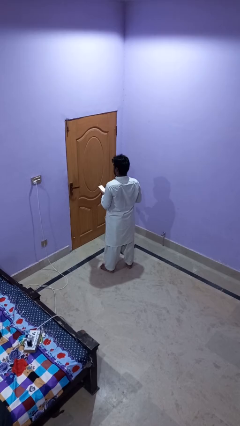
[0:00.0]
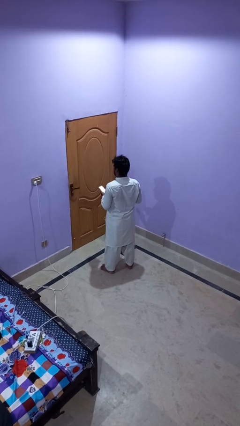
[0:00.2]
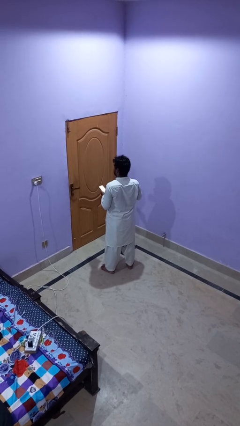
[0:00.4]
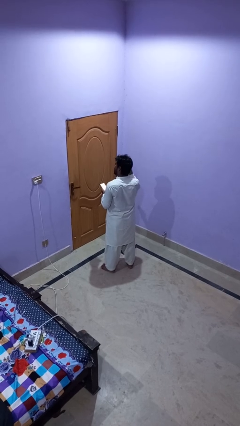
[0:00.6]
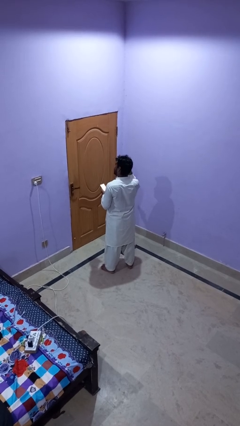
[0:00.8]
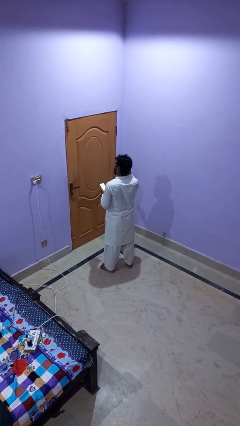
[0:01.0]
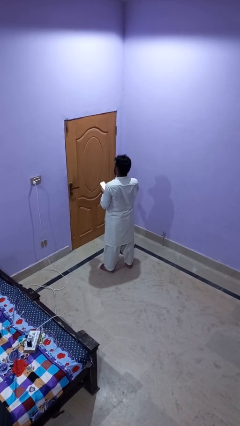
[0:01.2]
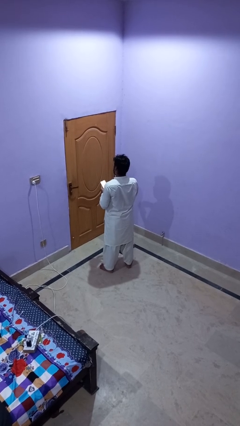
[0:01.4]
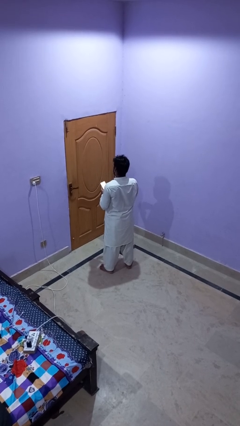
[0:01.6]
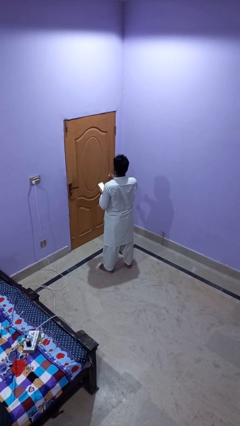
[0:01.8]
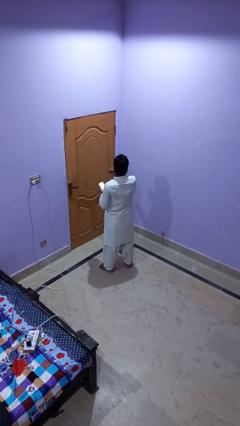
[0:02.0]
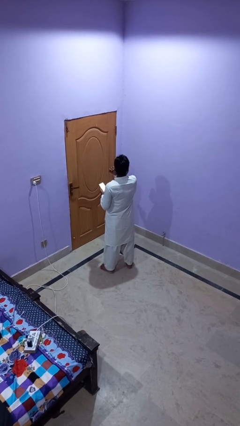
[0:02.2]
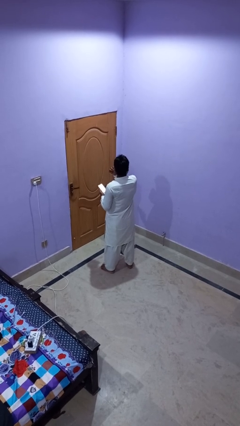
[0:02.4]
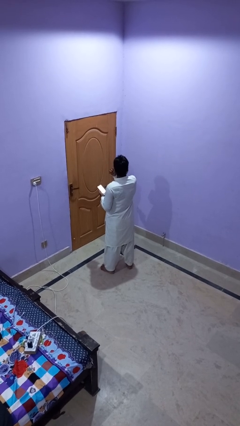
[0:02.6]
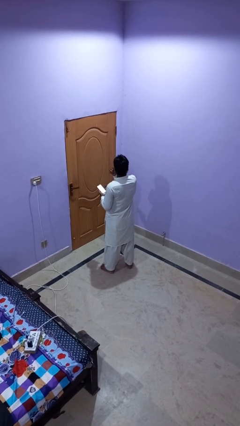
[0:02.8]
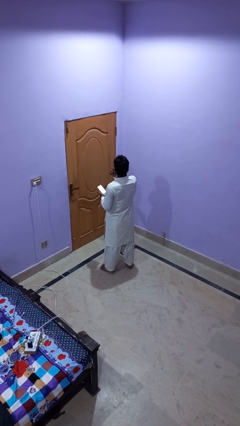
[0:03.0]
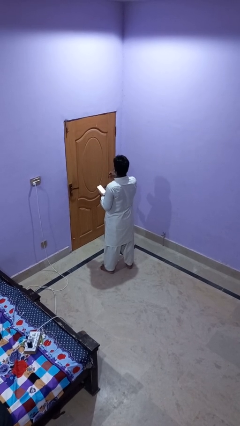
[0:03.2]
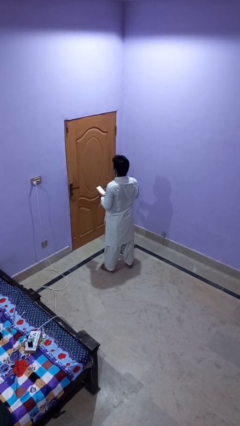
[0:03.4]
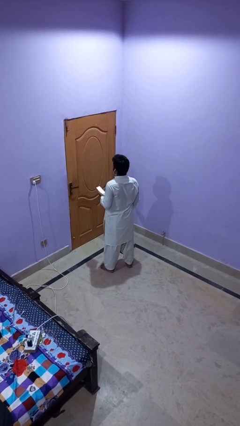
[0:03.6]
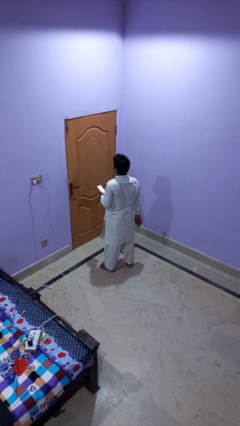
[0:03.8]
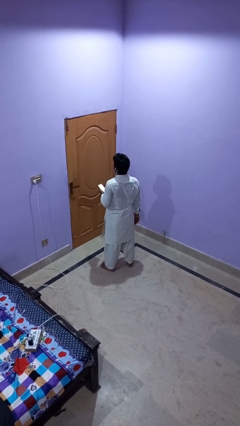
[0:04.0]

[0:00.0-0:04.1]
person puts on headphones

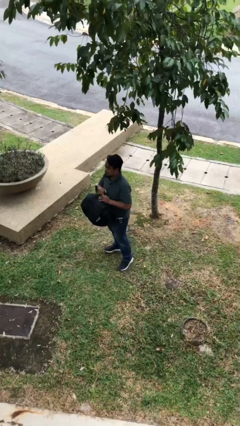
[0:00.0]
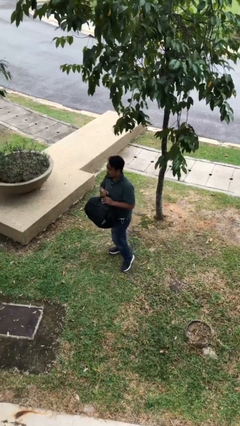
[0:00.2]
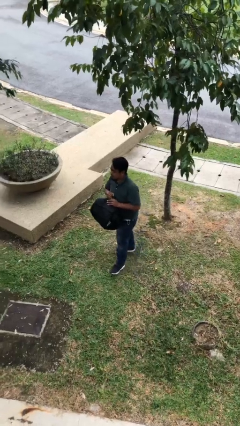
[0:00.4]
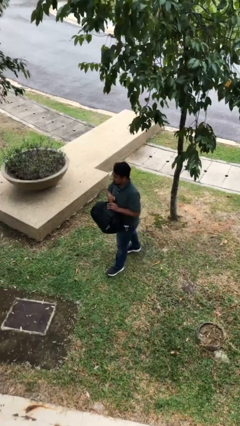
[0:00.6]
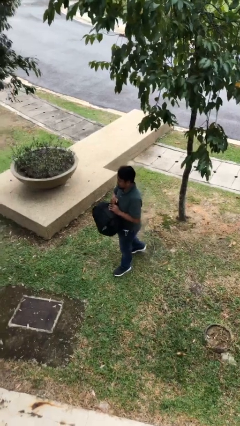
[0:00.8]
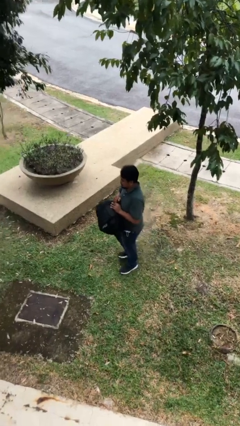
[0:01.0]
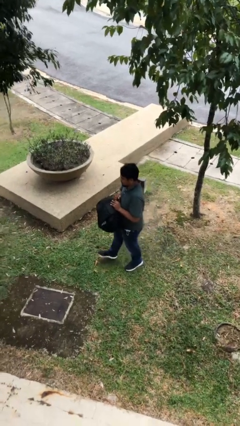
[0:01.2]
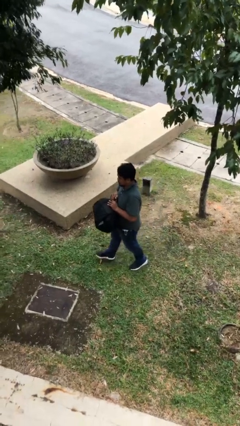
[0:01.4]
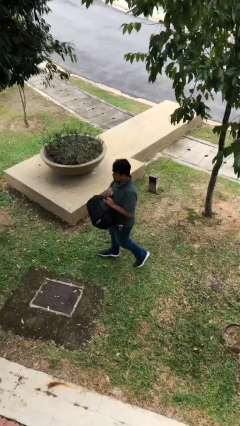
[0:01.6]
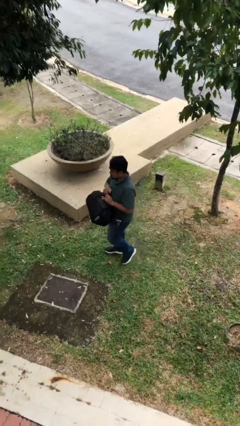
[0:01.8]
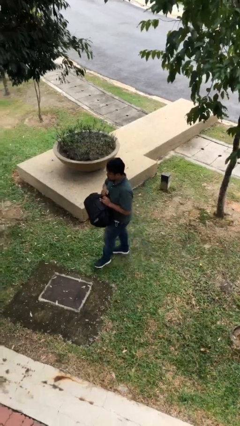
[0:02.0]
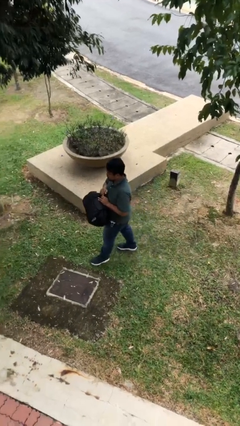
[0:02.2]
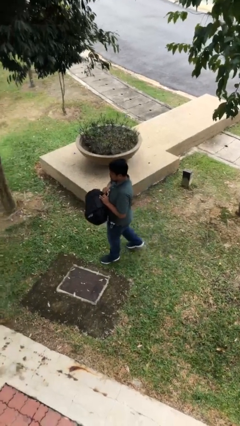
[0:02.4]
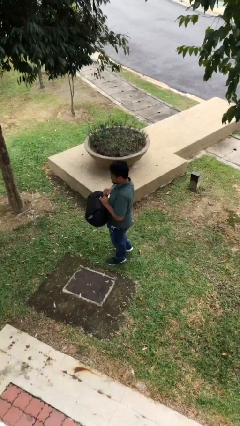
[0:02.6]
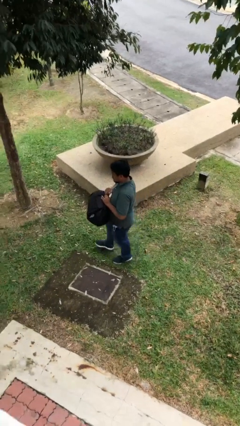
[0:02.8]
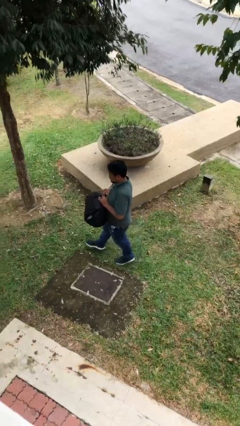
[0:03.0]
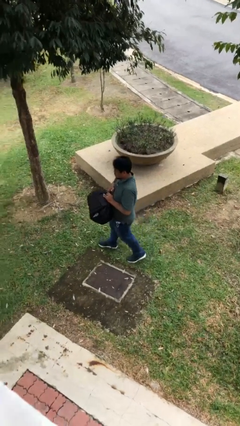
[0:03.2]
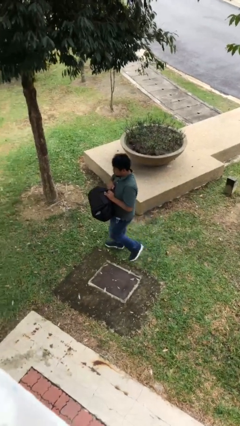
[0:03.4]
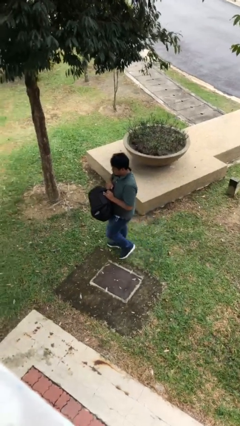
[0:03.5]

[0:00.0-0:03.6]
person carries heavy object

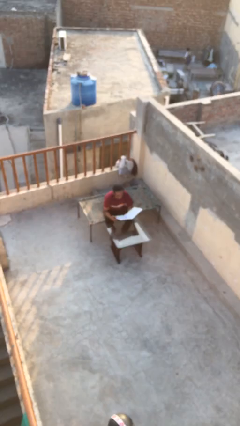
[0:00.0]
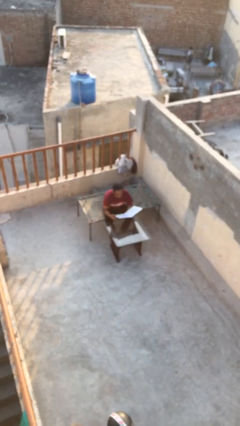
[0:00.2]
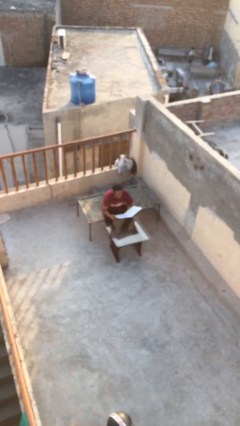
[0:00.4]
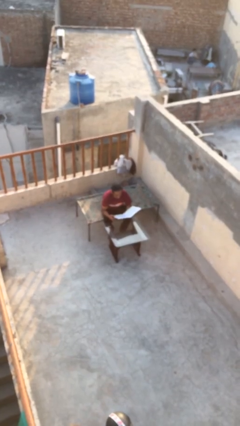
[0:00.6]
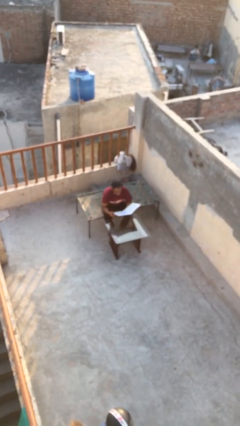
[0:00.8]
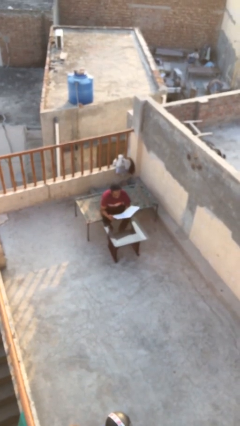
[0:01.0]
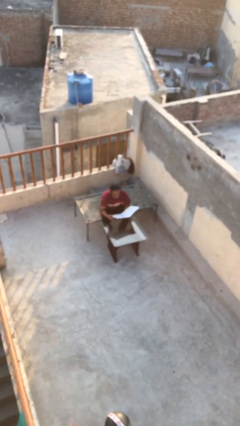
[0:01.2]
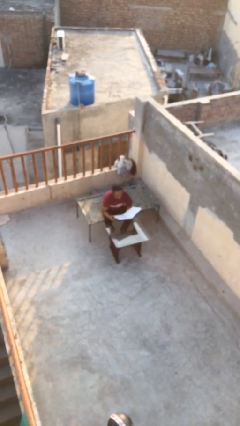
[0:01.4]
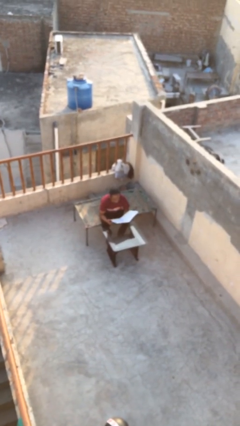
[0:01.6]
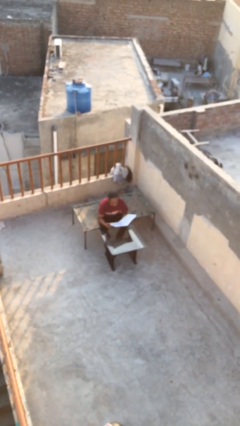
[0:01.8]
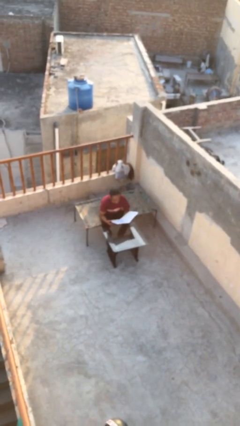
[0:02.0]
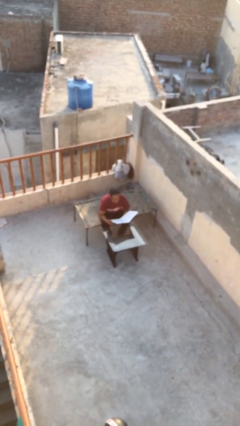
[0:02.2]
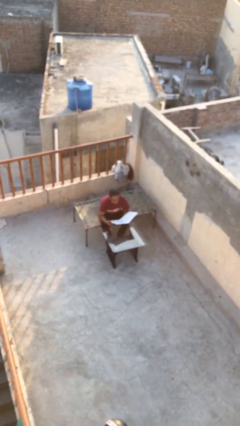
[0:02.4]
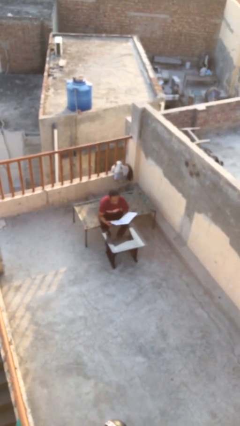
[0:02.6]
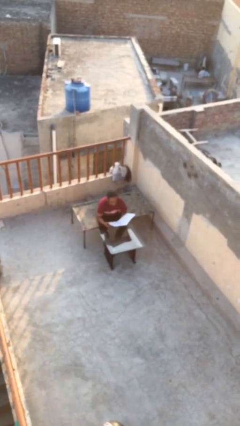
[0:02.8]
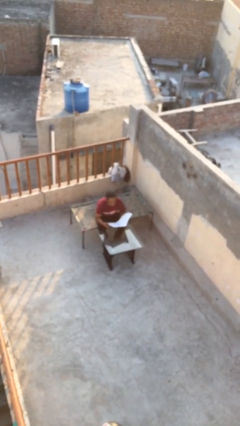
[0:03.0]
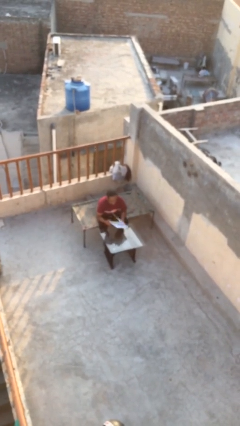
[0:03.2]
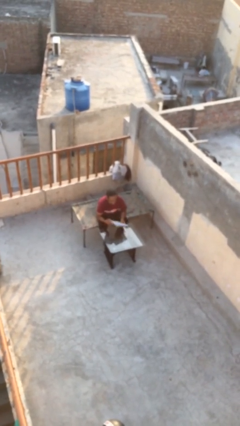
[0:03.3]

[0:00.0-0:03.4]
person reads document

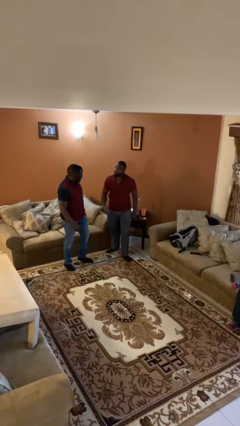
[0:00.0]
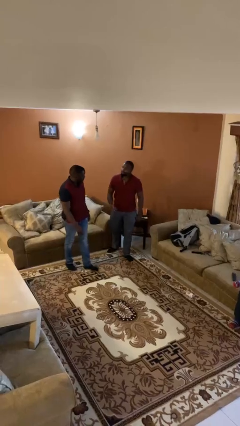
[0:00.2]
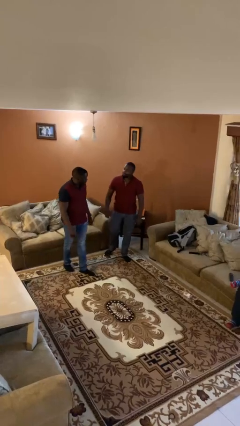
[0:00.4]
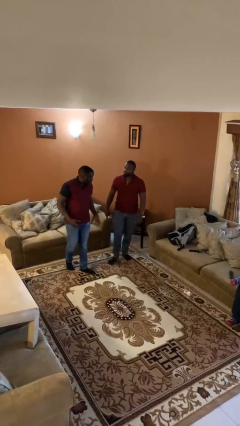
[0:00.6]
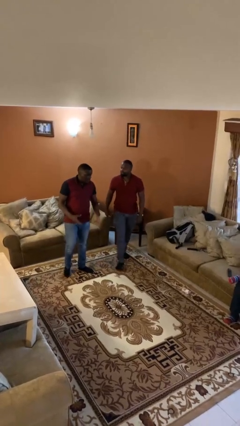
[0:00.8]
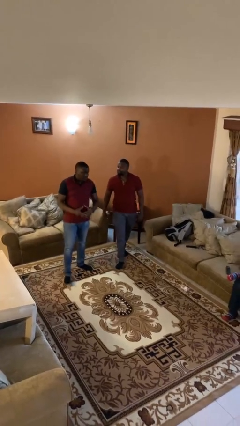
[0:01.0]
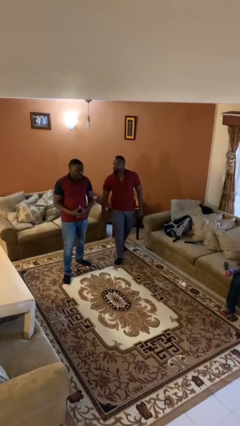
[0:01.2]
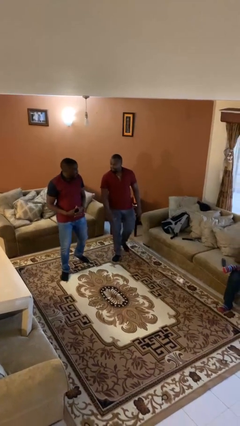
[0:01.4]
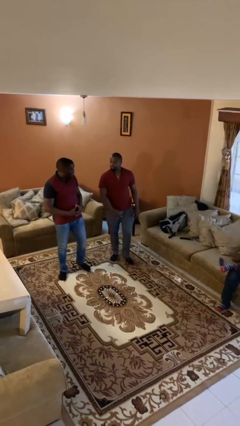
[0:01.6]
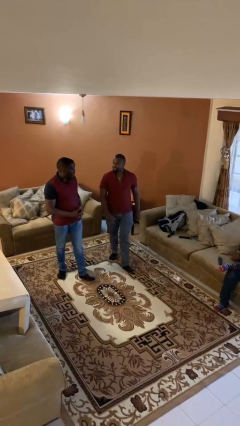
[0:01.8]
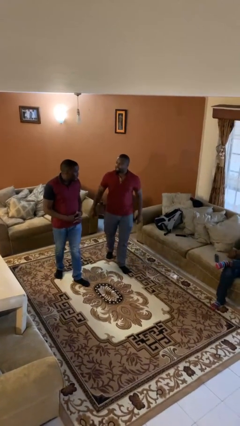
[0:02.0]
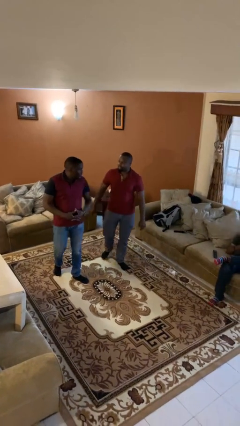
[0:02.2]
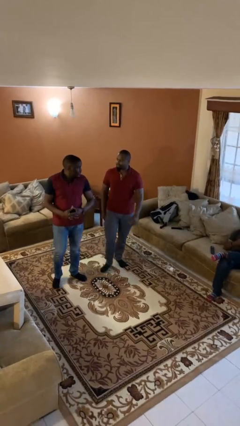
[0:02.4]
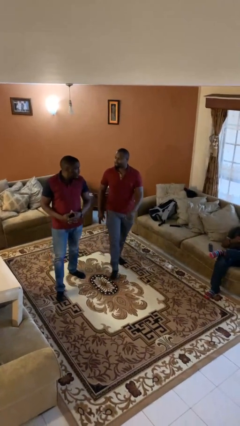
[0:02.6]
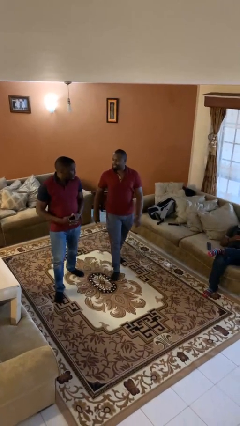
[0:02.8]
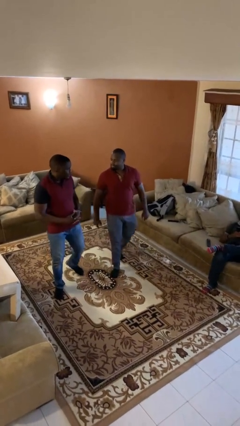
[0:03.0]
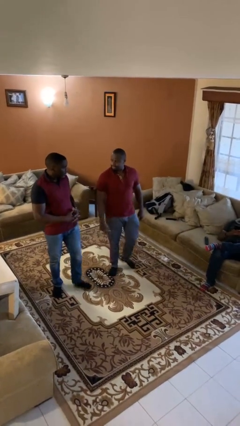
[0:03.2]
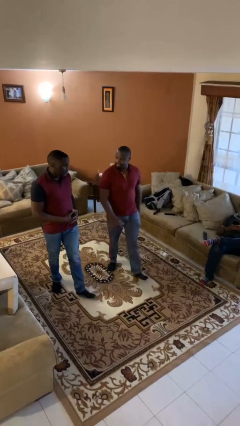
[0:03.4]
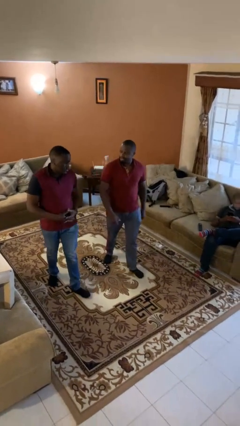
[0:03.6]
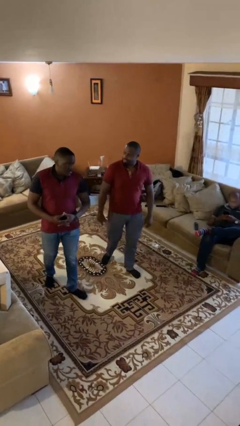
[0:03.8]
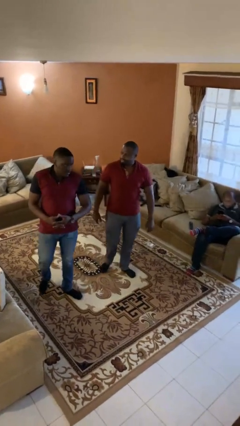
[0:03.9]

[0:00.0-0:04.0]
person talks to person

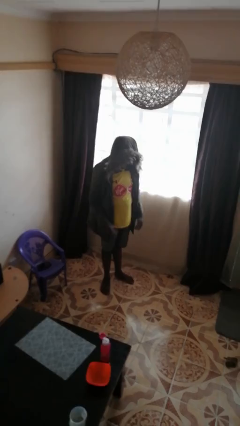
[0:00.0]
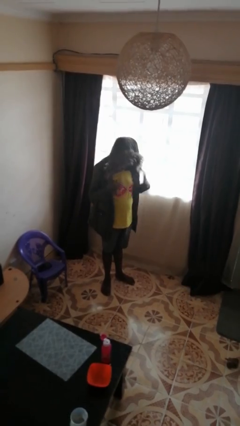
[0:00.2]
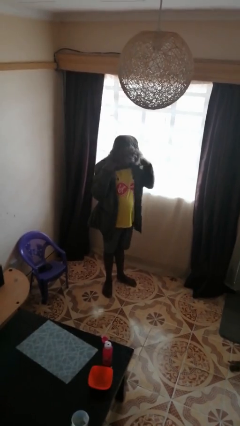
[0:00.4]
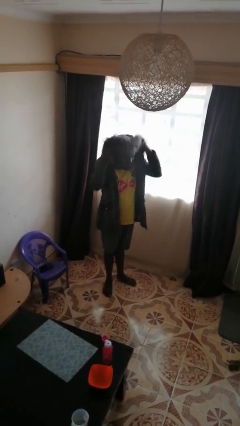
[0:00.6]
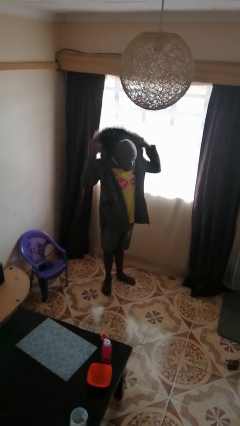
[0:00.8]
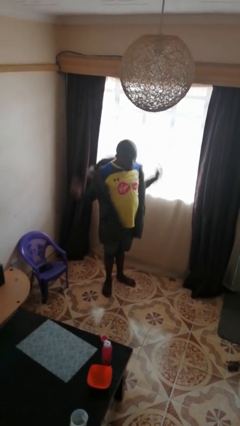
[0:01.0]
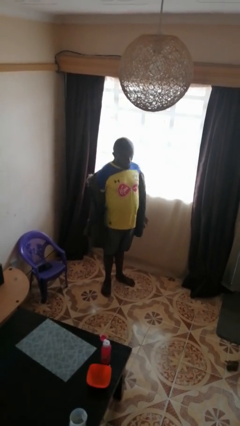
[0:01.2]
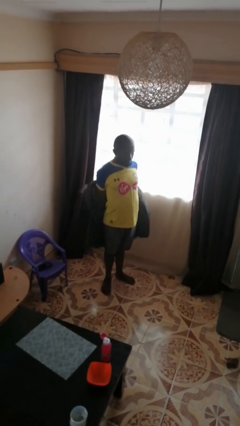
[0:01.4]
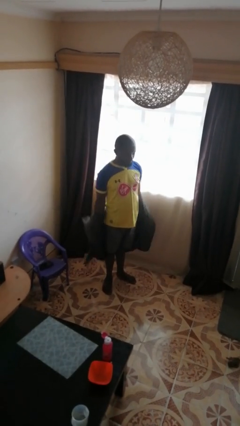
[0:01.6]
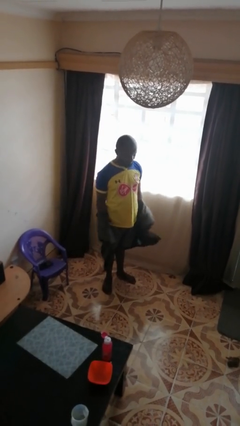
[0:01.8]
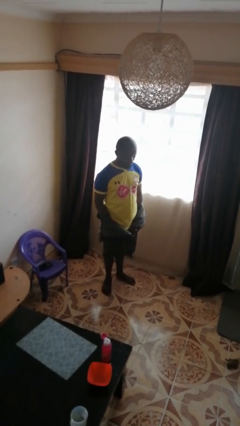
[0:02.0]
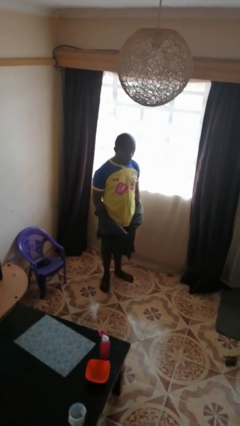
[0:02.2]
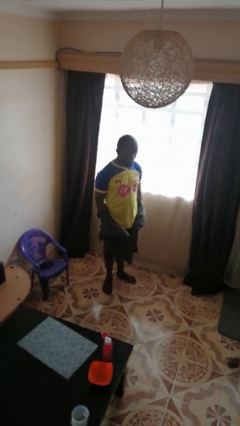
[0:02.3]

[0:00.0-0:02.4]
person takes off hoodie
